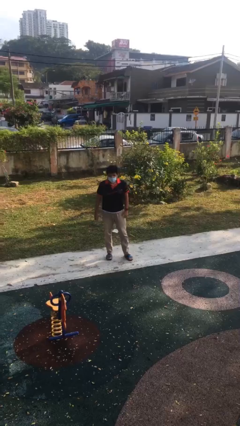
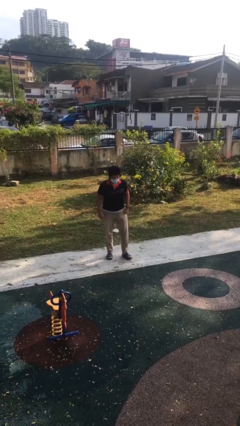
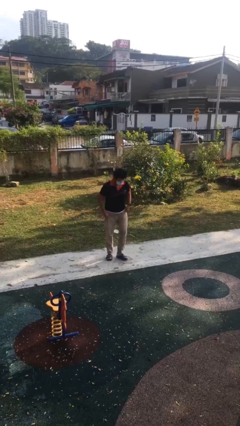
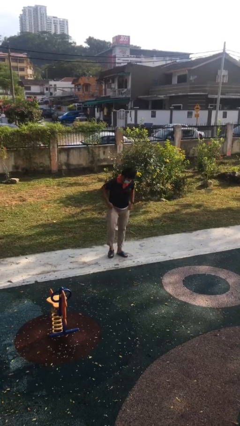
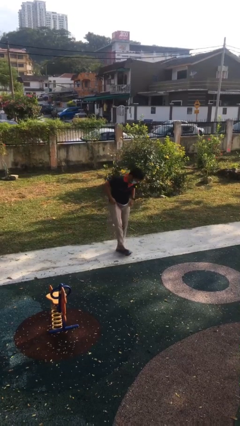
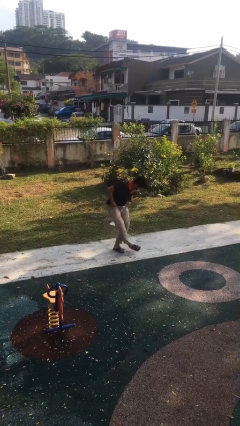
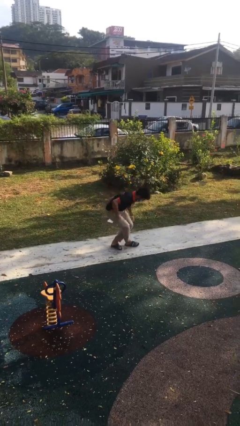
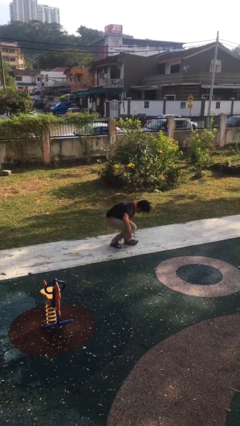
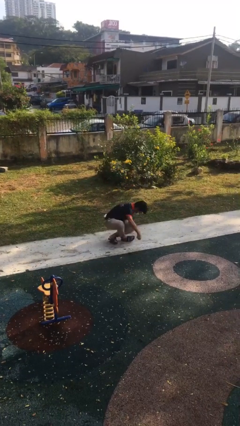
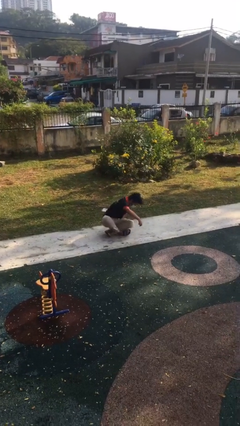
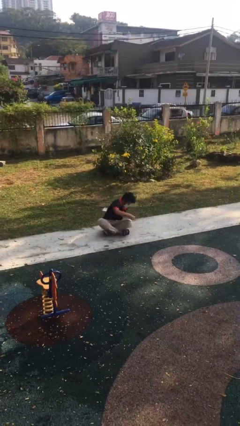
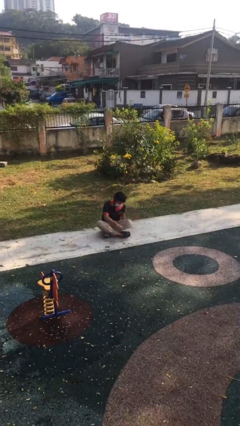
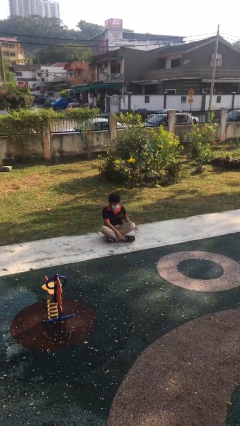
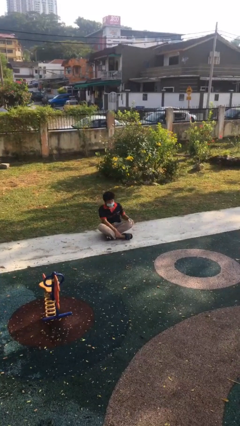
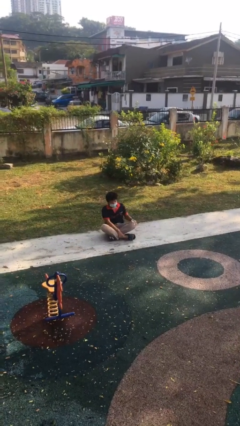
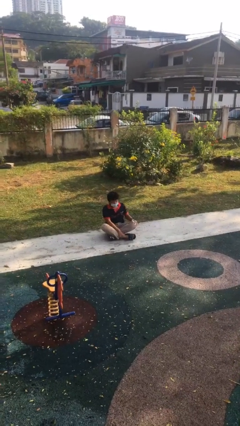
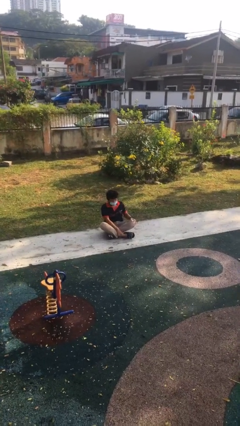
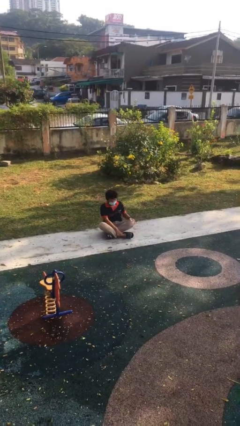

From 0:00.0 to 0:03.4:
person sits crisscross

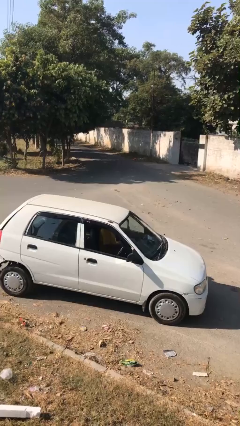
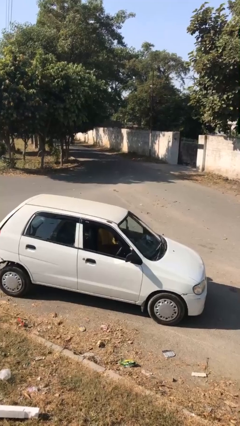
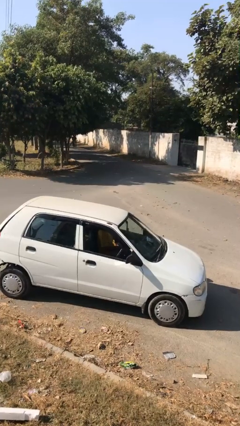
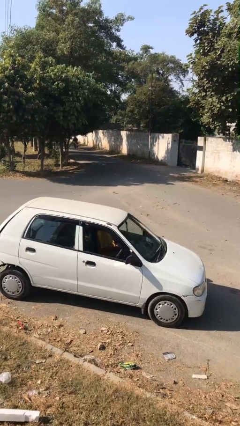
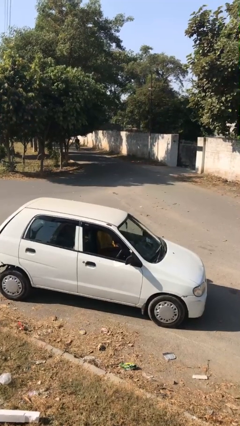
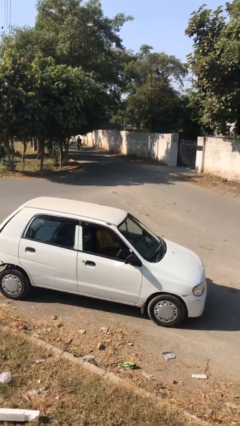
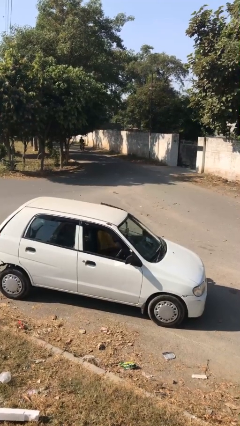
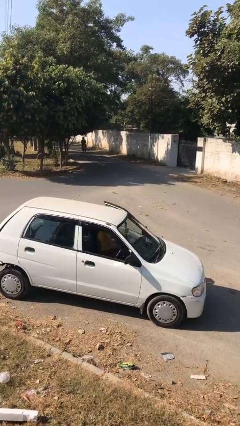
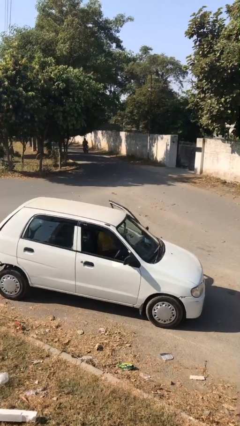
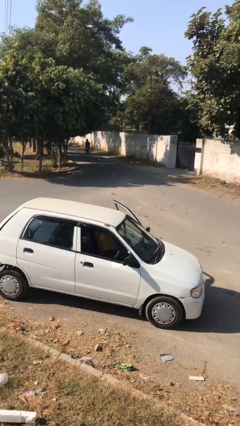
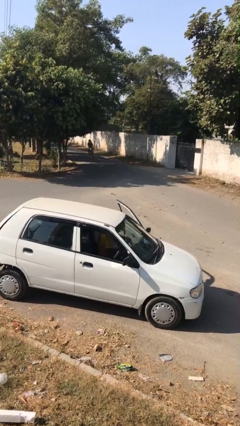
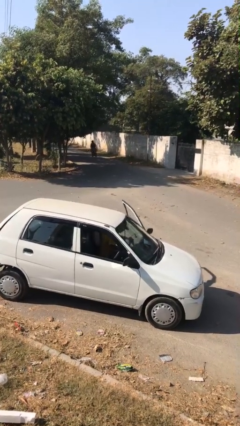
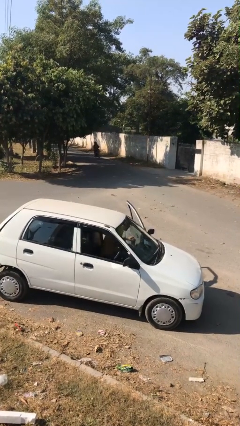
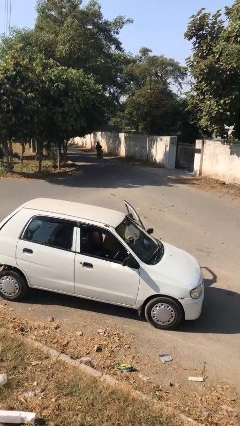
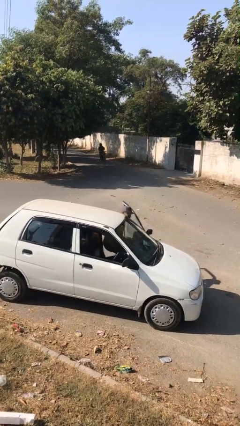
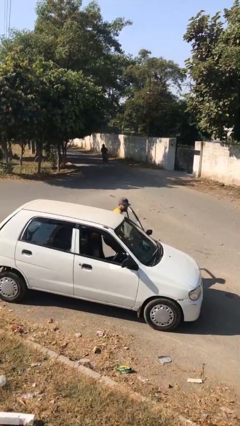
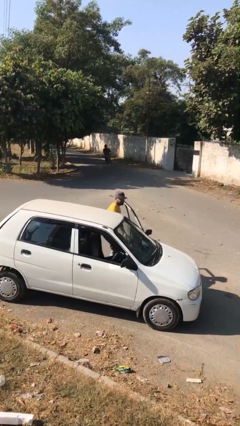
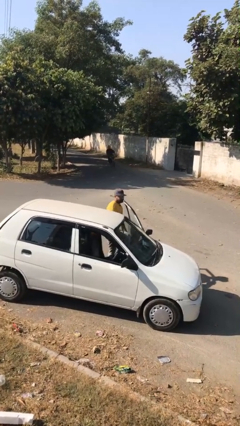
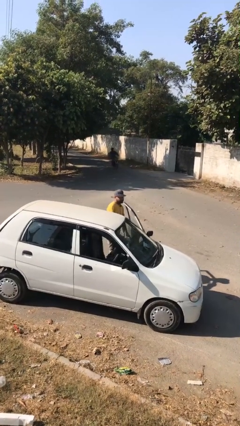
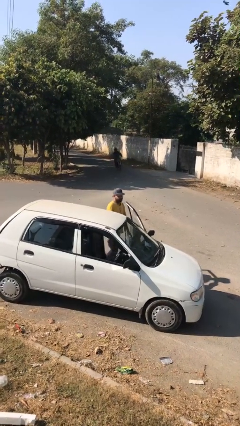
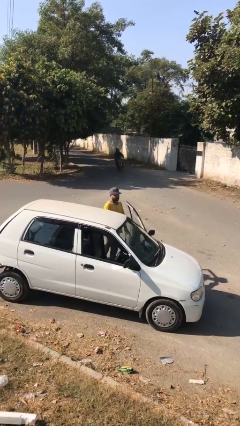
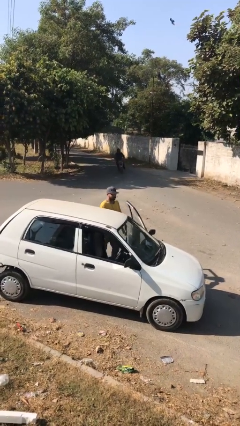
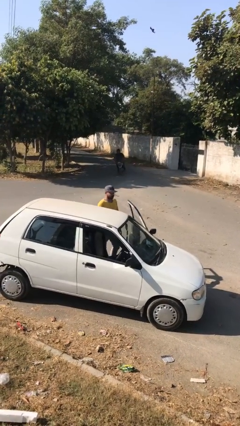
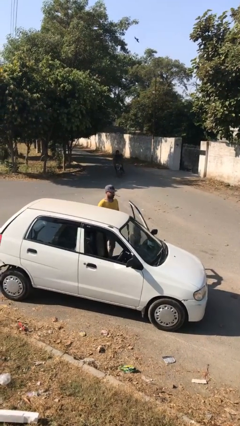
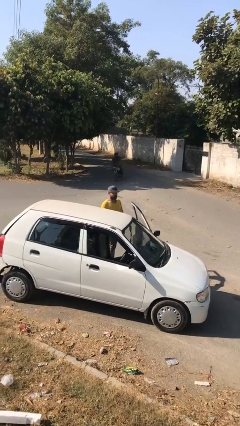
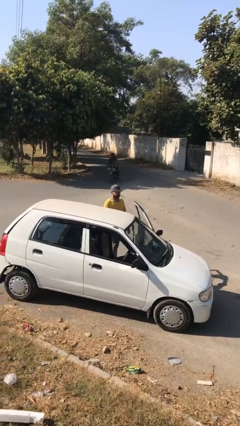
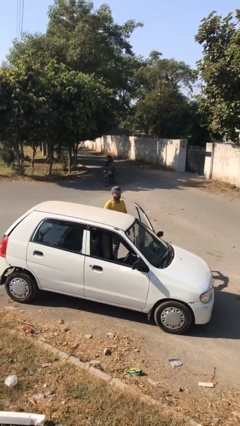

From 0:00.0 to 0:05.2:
person exits car

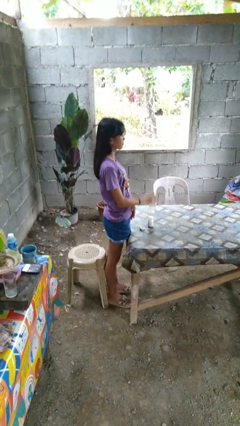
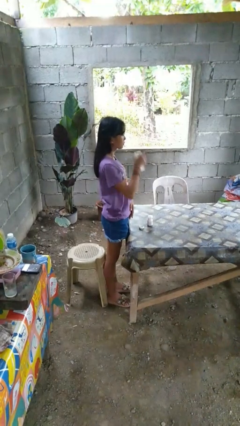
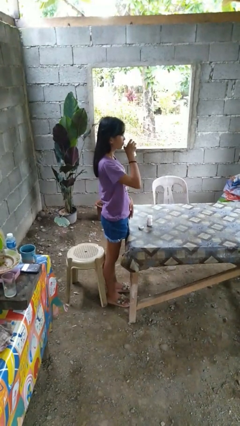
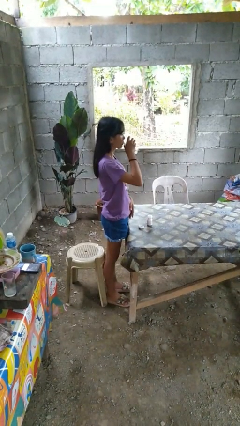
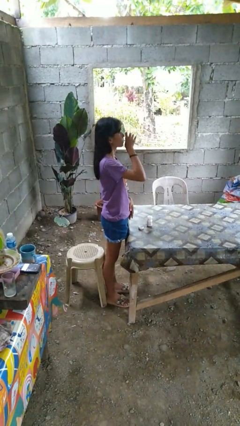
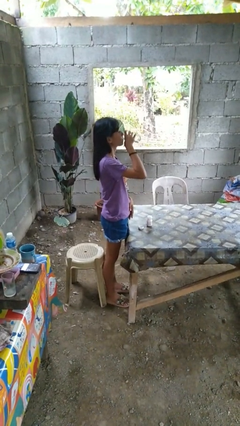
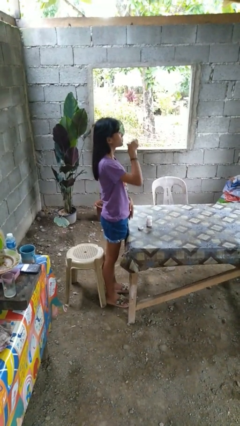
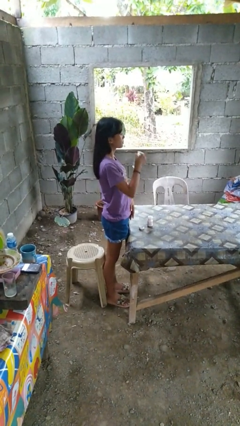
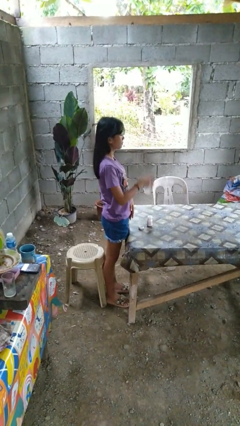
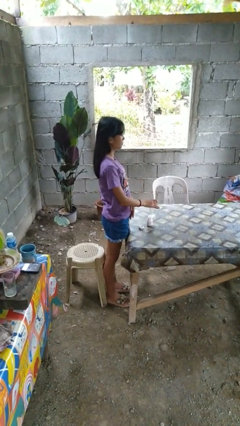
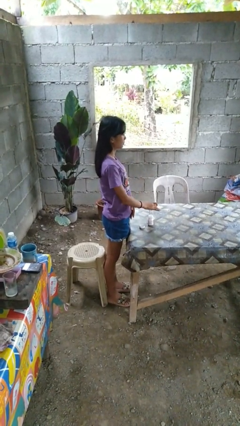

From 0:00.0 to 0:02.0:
person drinks from cup

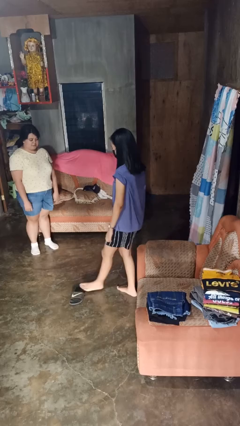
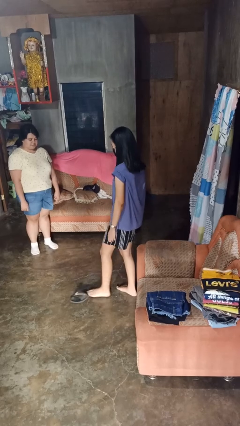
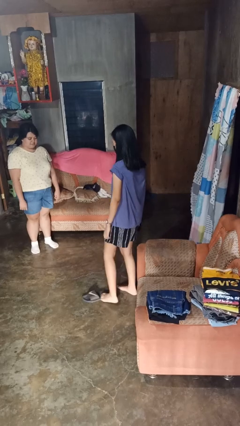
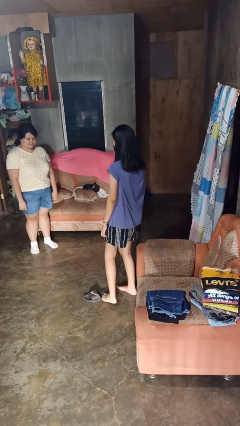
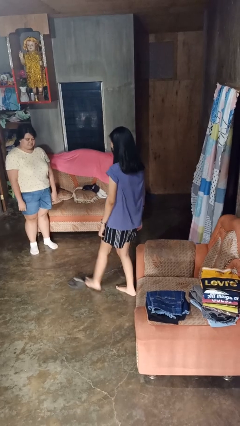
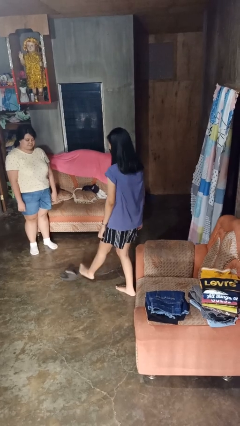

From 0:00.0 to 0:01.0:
person kicks object to person

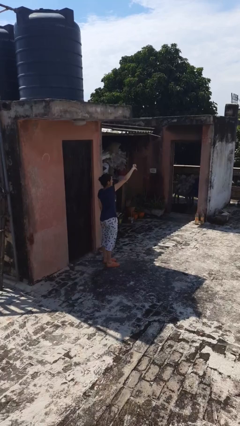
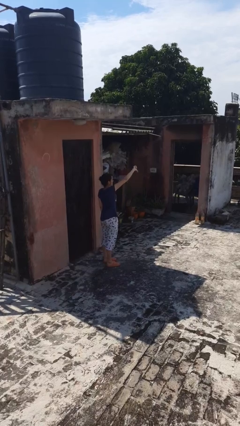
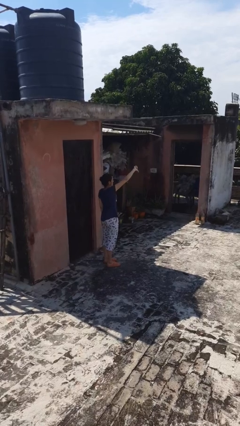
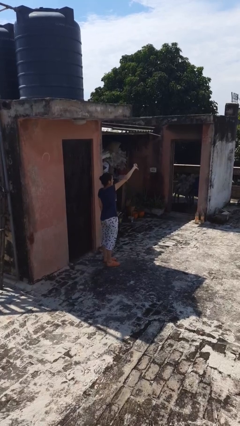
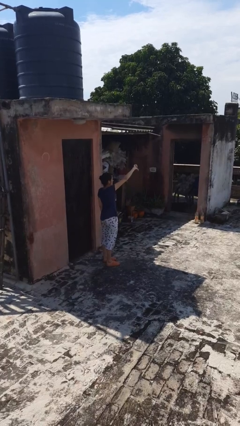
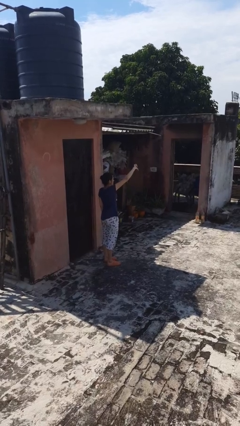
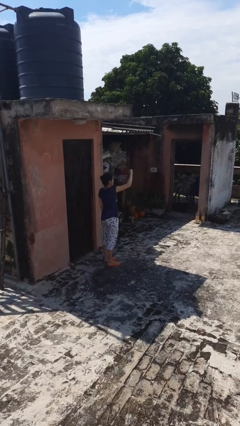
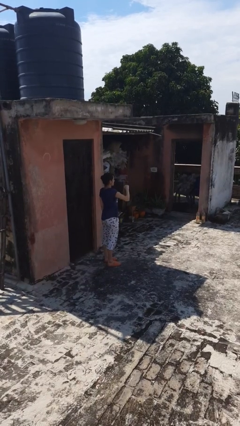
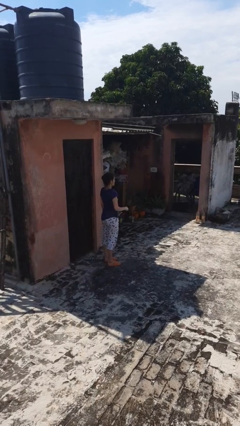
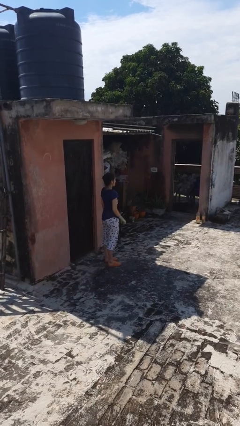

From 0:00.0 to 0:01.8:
person gestures thumbs down

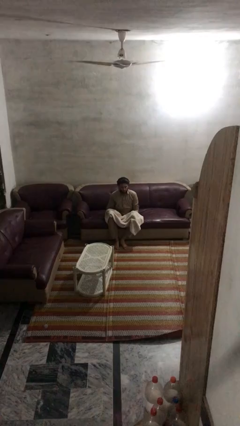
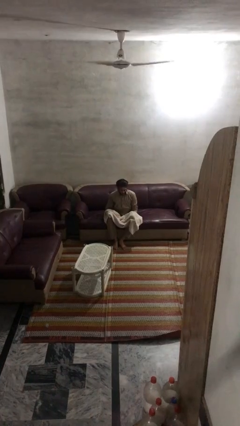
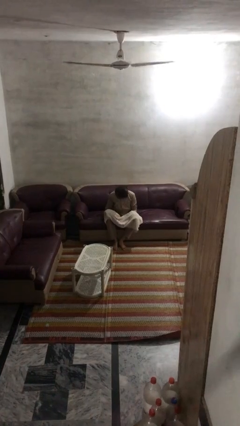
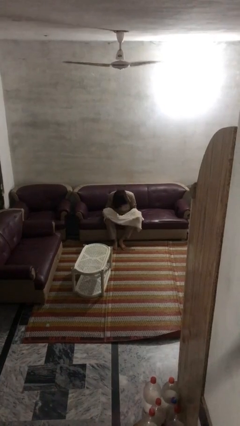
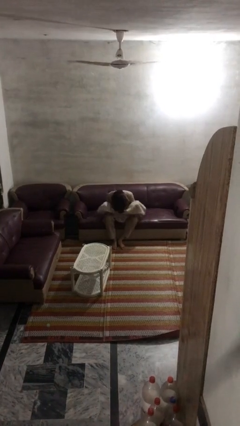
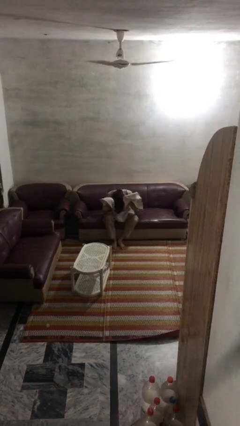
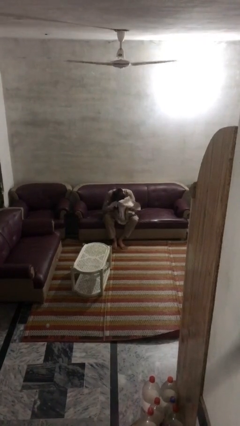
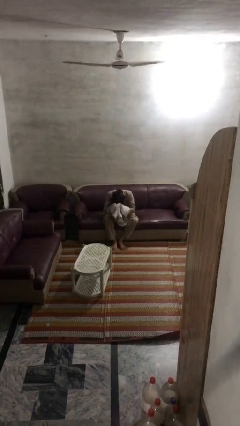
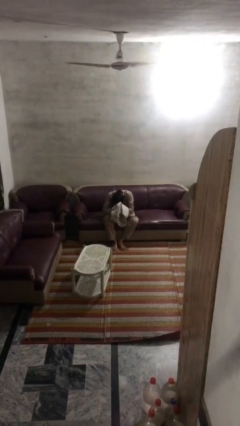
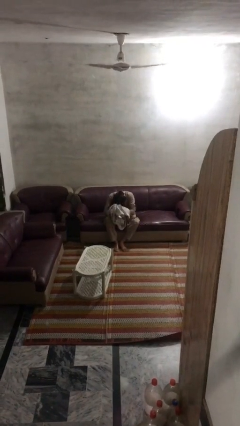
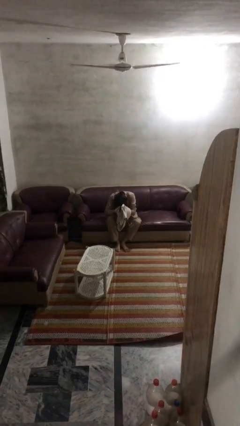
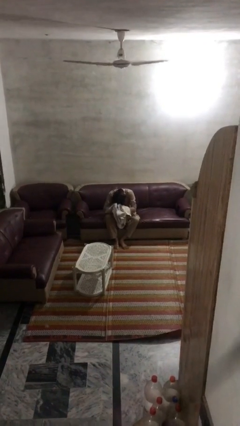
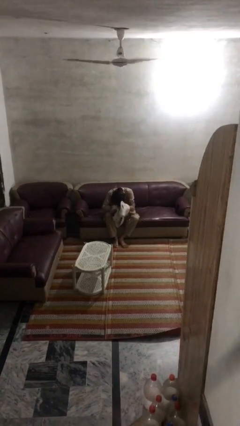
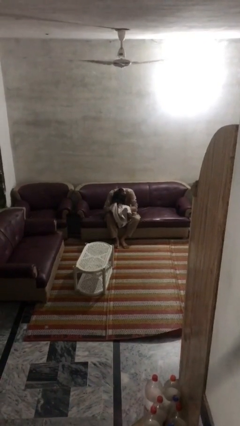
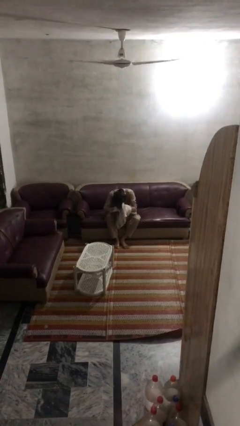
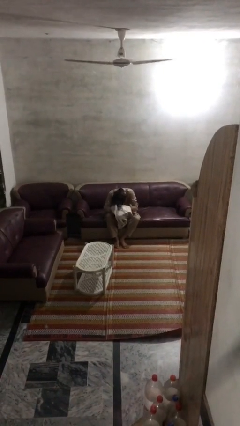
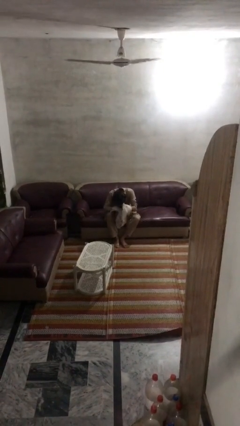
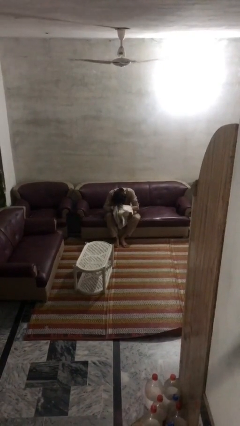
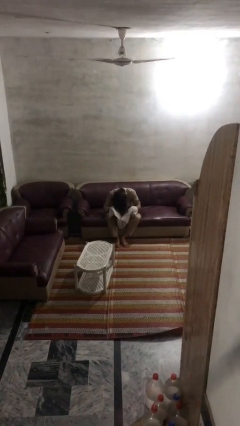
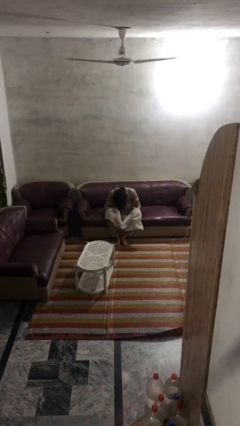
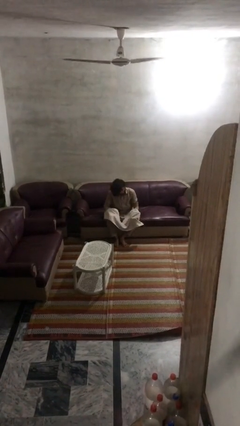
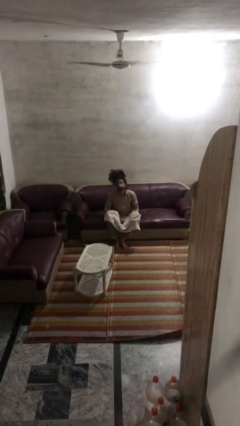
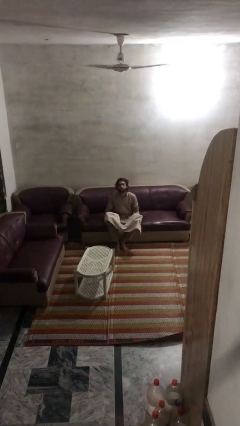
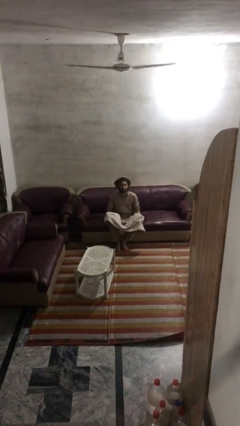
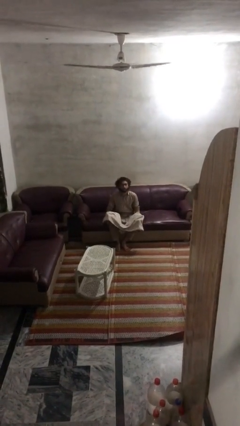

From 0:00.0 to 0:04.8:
person dries hair with towel
